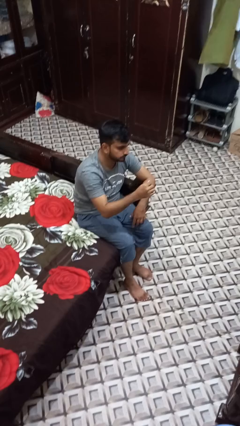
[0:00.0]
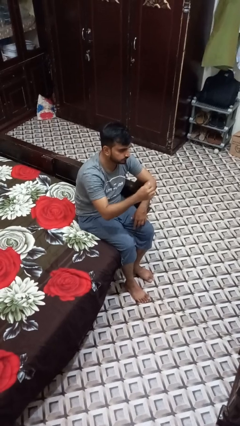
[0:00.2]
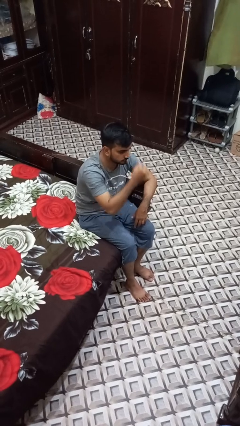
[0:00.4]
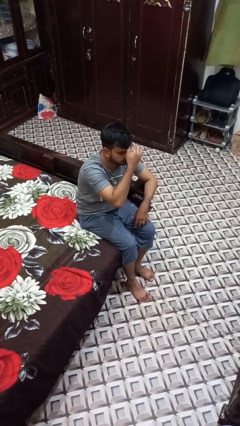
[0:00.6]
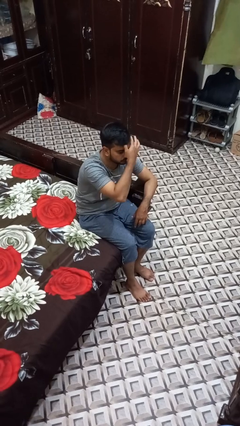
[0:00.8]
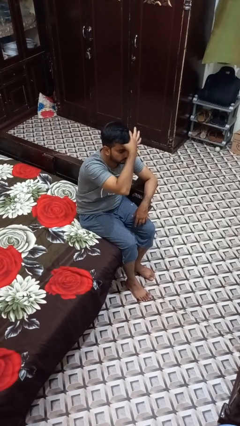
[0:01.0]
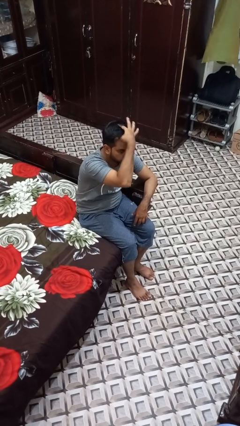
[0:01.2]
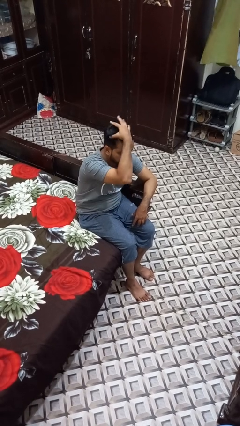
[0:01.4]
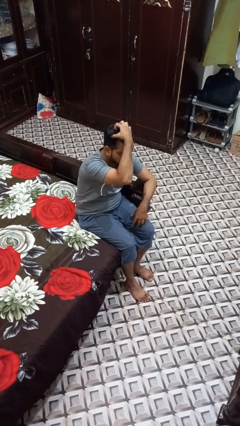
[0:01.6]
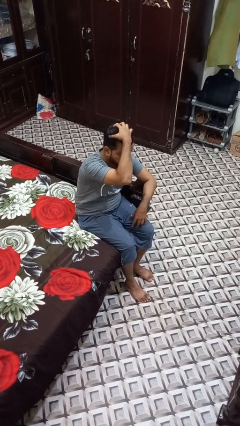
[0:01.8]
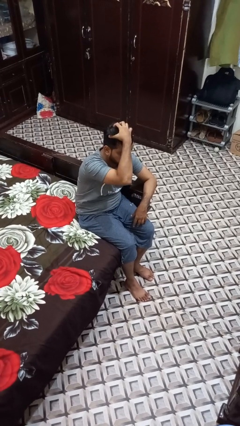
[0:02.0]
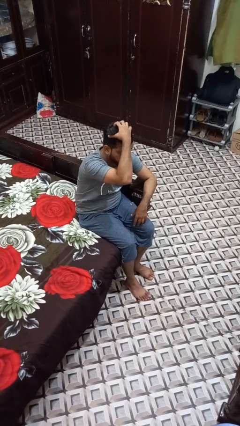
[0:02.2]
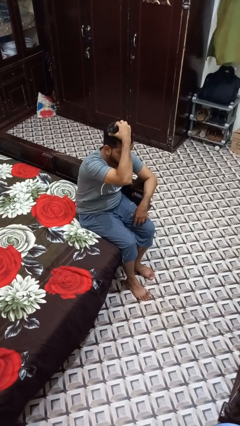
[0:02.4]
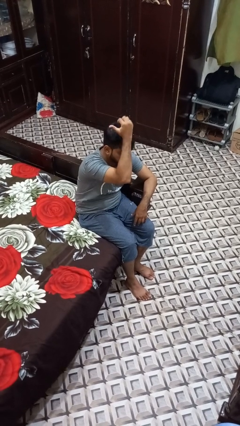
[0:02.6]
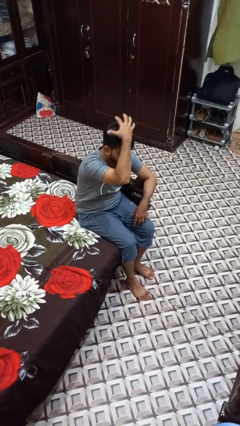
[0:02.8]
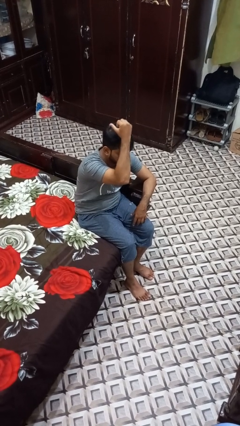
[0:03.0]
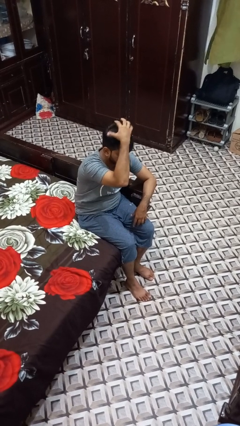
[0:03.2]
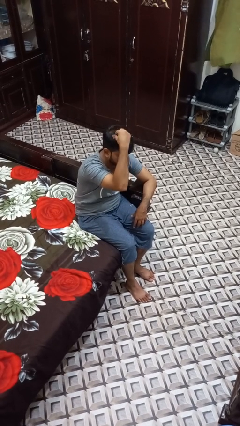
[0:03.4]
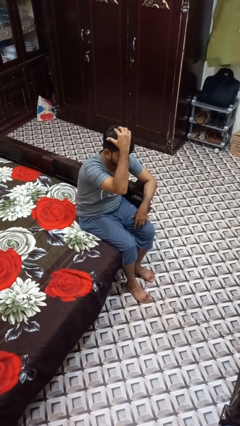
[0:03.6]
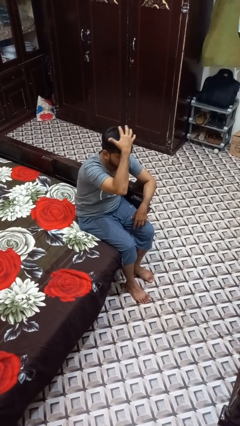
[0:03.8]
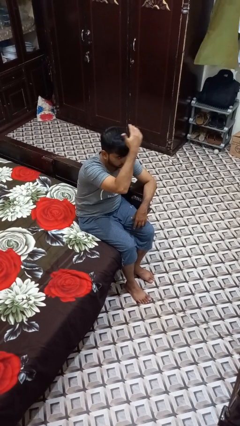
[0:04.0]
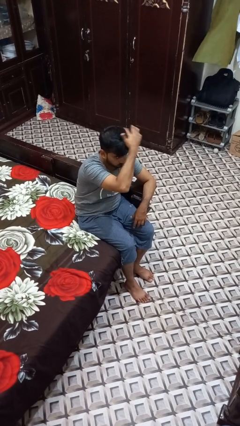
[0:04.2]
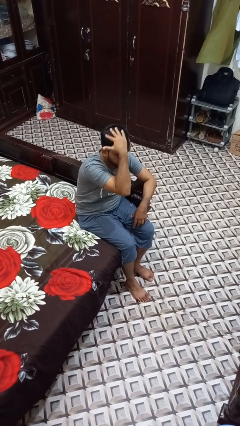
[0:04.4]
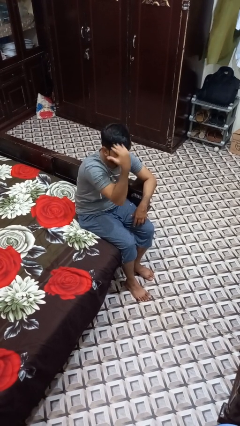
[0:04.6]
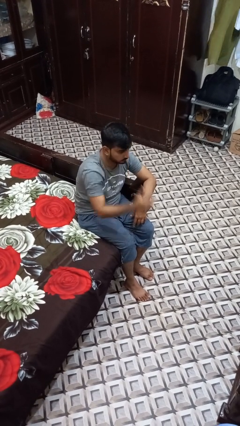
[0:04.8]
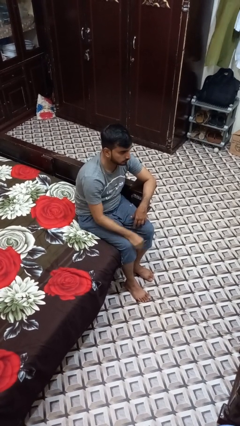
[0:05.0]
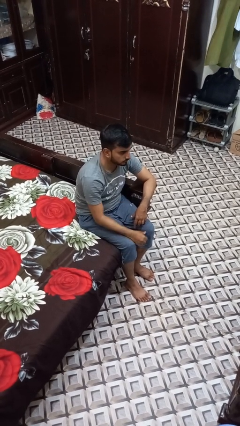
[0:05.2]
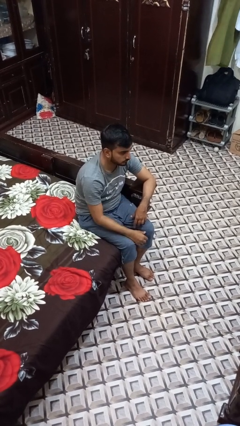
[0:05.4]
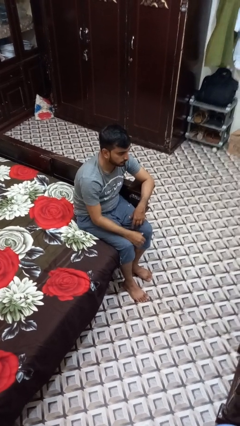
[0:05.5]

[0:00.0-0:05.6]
person strokes hair

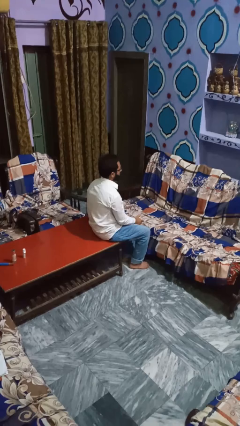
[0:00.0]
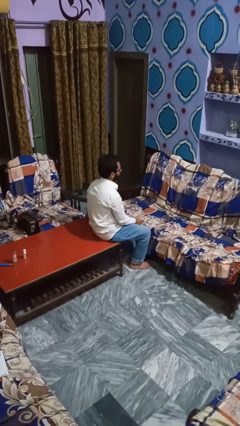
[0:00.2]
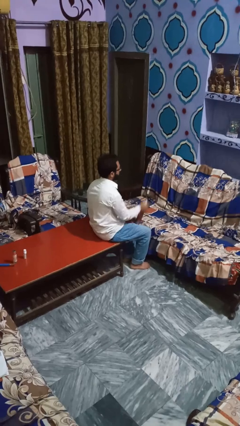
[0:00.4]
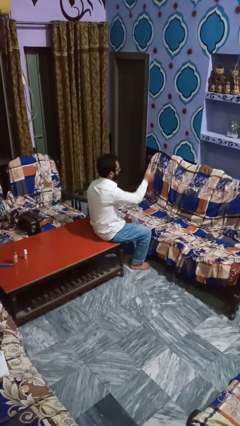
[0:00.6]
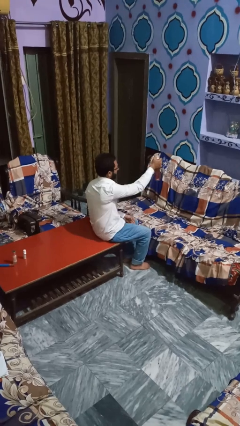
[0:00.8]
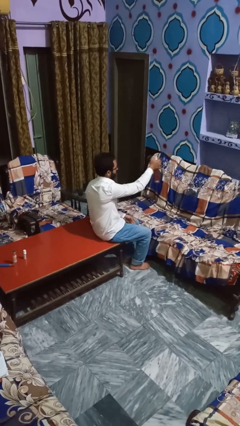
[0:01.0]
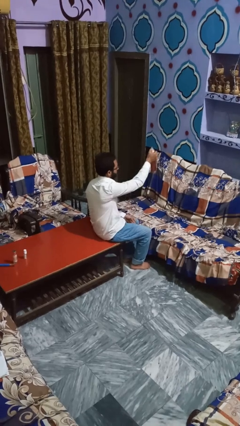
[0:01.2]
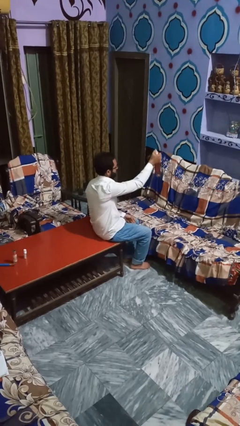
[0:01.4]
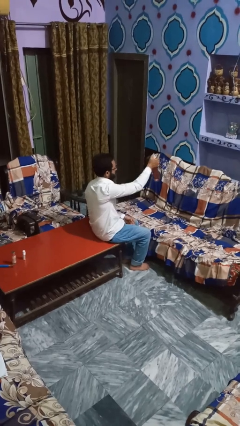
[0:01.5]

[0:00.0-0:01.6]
person sprays from bottle

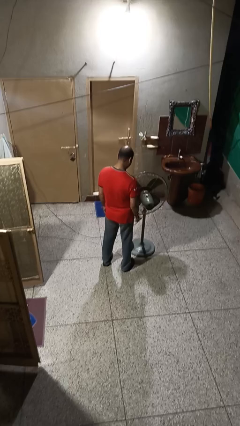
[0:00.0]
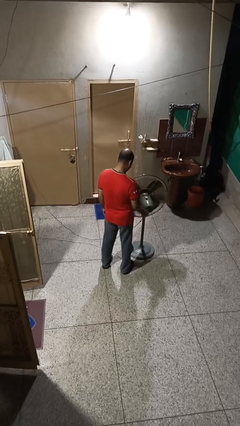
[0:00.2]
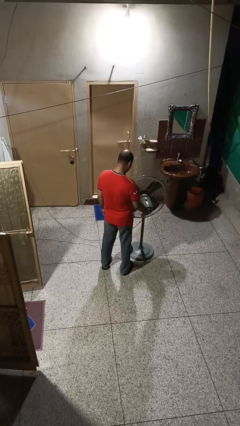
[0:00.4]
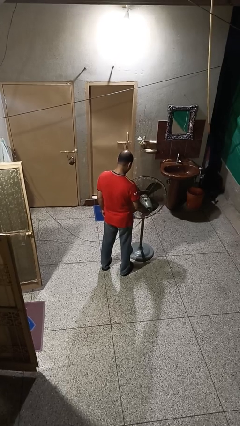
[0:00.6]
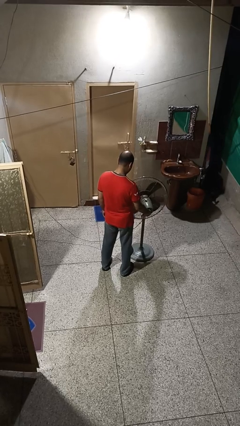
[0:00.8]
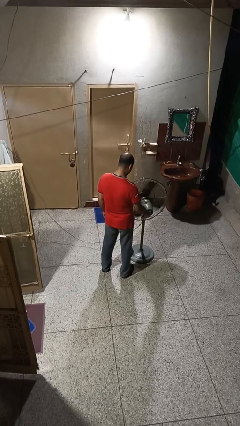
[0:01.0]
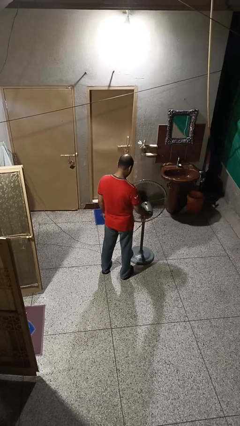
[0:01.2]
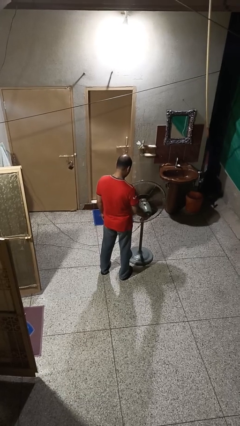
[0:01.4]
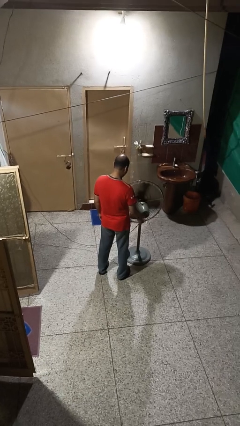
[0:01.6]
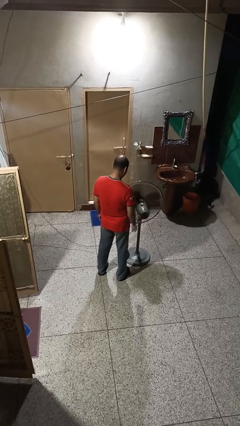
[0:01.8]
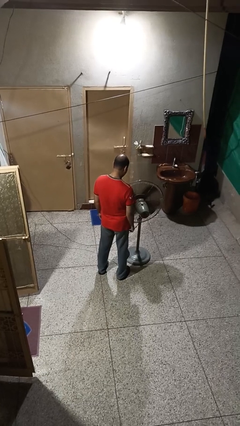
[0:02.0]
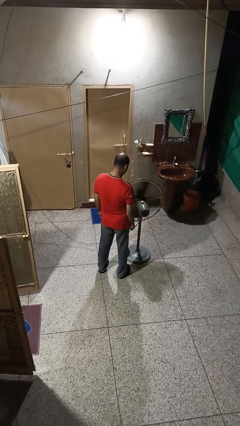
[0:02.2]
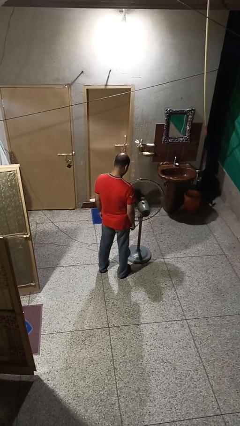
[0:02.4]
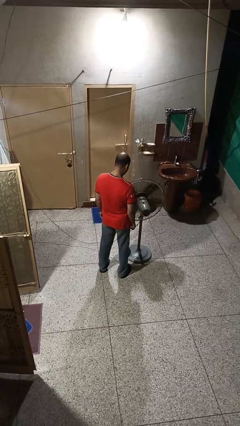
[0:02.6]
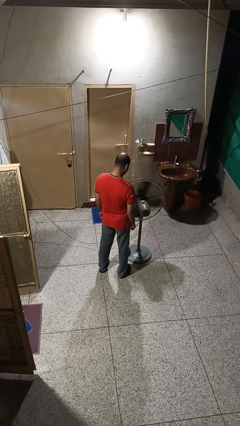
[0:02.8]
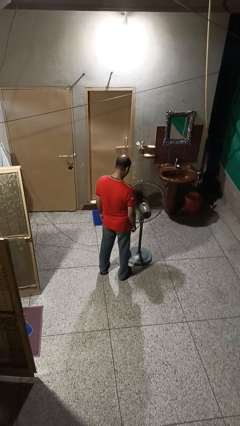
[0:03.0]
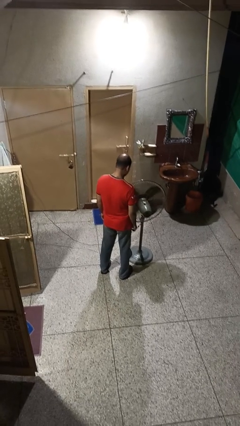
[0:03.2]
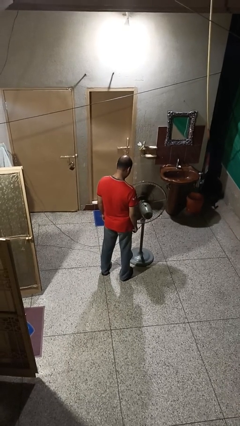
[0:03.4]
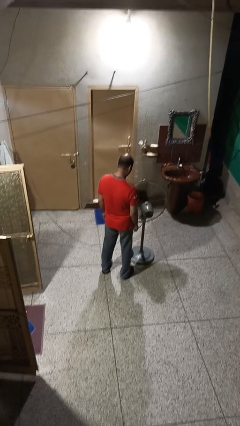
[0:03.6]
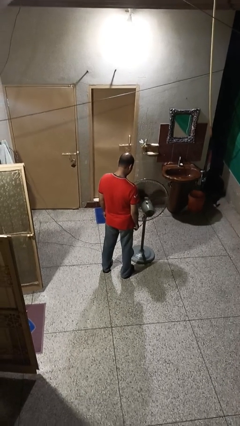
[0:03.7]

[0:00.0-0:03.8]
person turns on fan

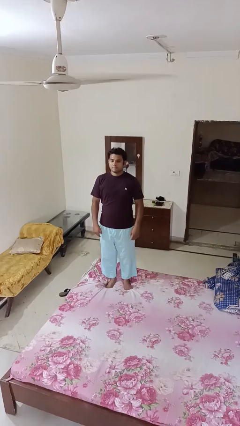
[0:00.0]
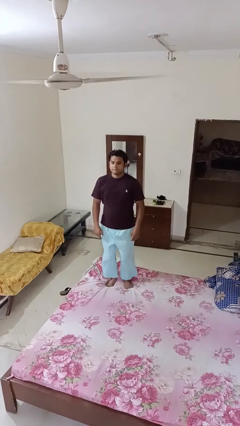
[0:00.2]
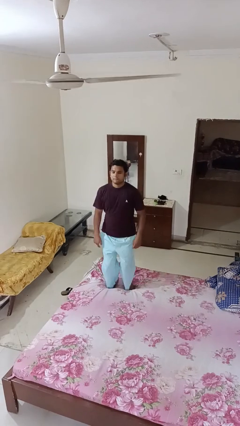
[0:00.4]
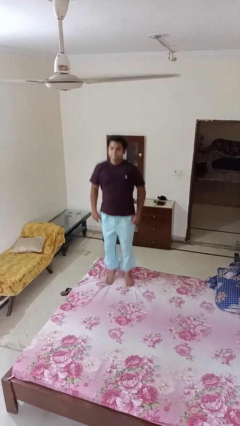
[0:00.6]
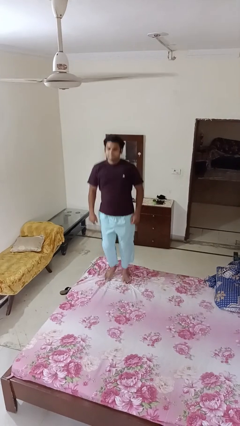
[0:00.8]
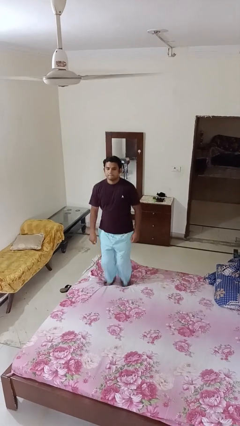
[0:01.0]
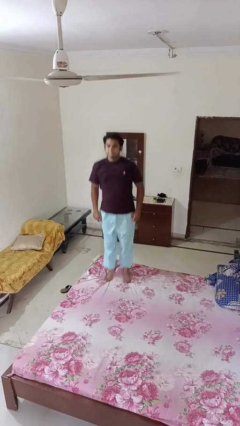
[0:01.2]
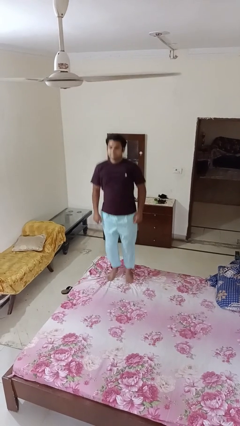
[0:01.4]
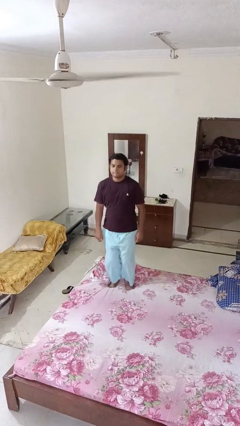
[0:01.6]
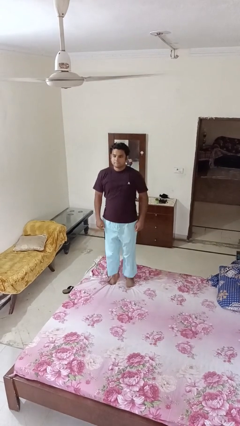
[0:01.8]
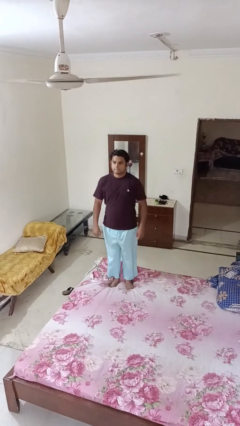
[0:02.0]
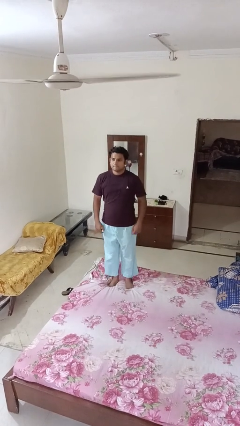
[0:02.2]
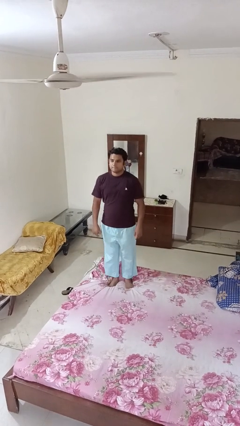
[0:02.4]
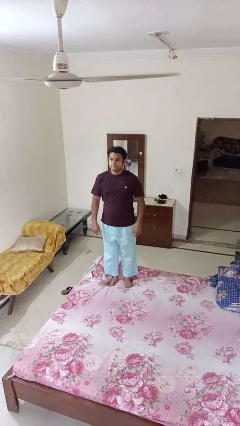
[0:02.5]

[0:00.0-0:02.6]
person jumps on bed

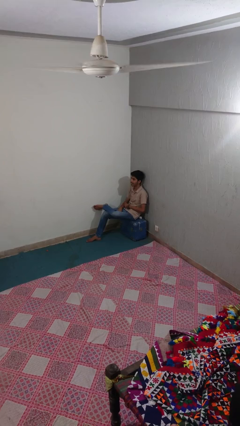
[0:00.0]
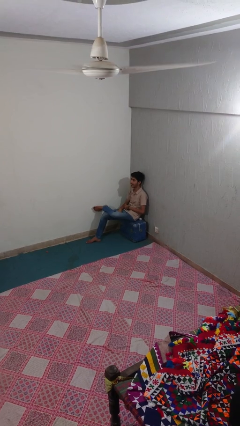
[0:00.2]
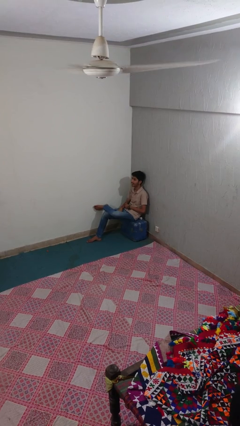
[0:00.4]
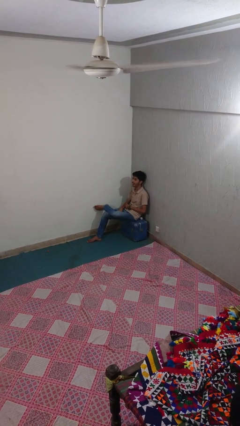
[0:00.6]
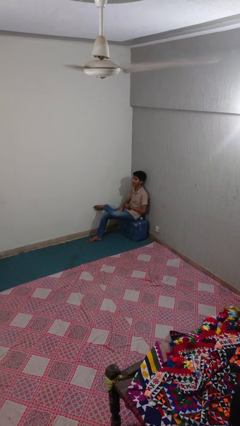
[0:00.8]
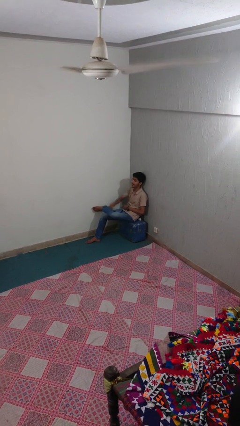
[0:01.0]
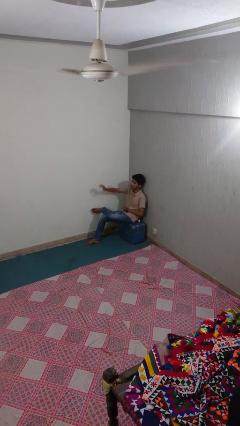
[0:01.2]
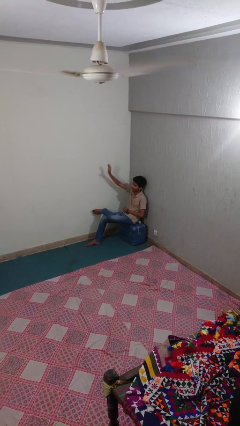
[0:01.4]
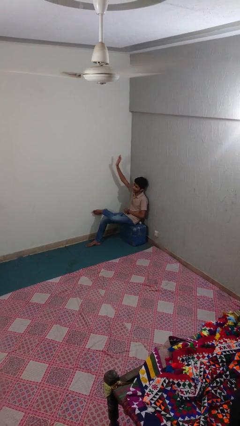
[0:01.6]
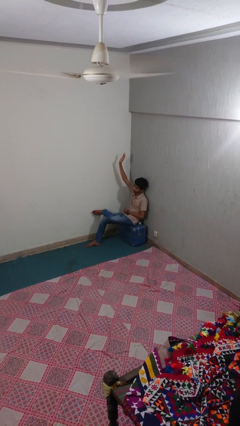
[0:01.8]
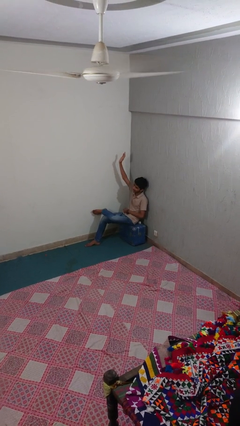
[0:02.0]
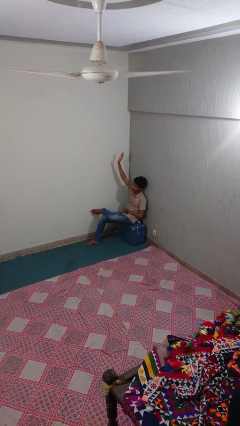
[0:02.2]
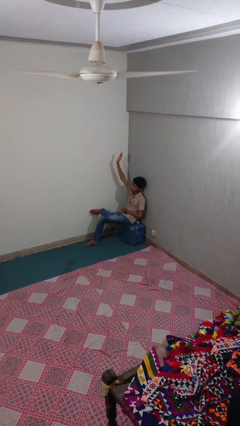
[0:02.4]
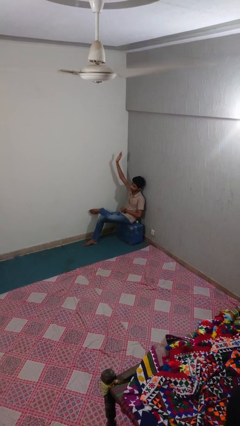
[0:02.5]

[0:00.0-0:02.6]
person gestures raise hand

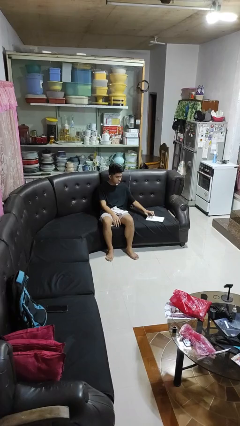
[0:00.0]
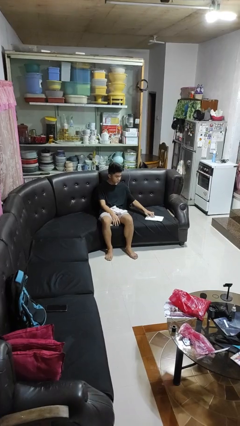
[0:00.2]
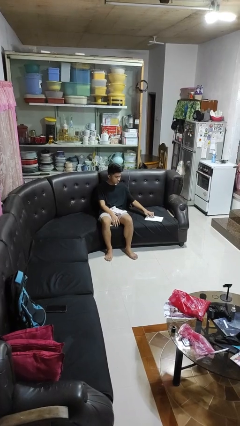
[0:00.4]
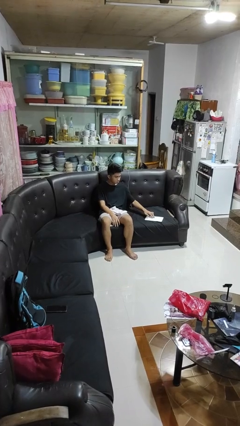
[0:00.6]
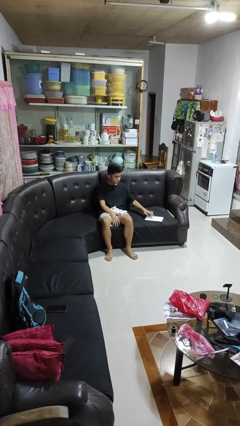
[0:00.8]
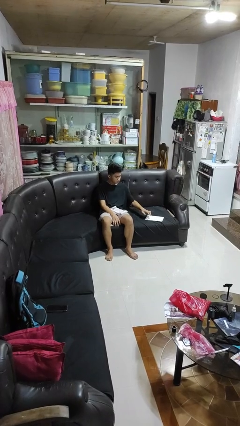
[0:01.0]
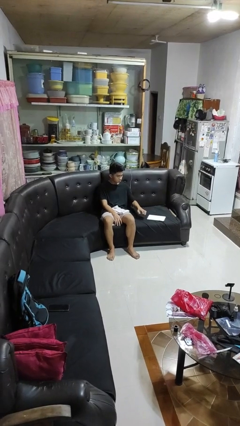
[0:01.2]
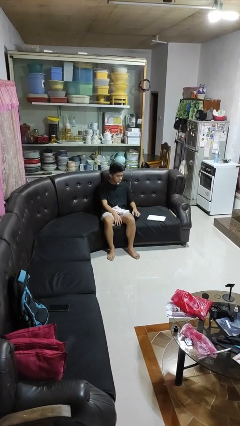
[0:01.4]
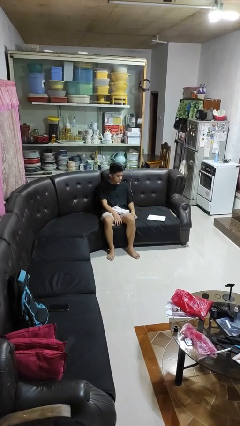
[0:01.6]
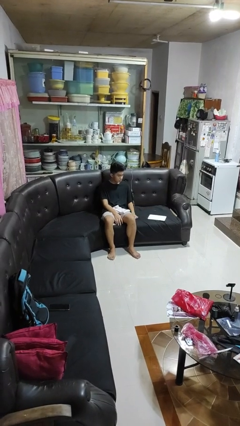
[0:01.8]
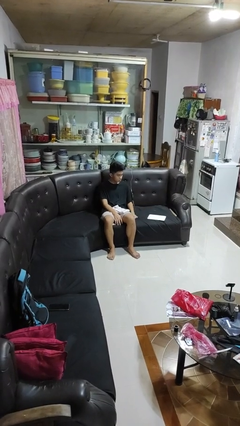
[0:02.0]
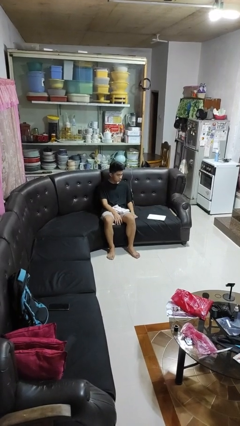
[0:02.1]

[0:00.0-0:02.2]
person taps object with finger
